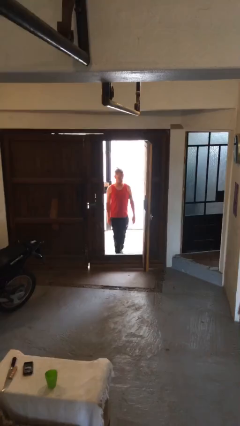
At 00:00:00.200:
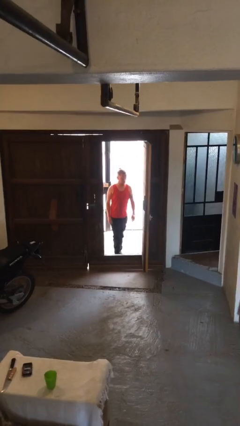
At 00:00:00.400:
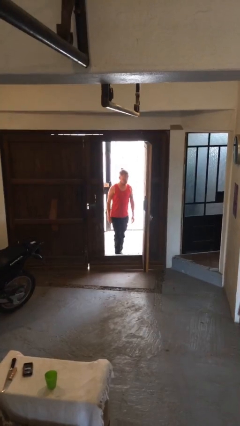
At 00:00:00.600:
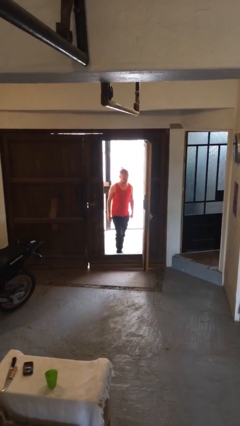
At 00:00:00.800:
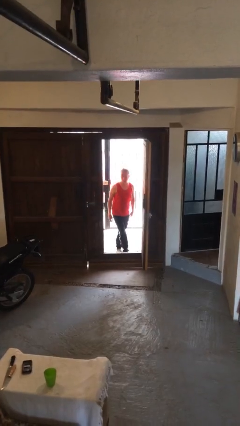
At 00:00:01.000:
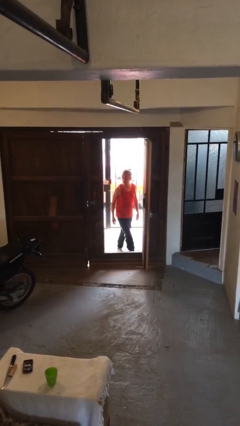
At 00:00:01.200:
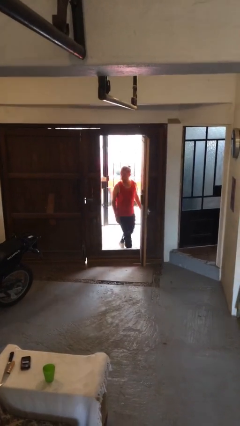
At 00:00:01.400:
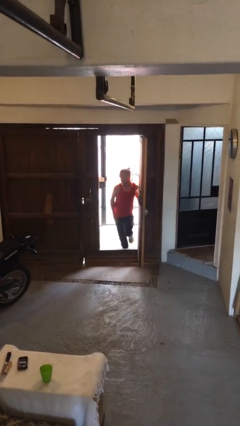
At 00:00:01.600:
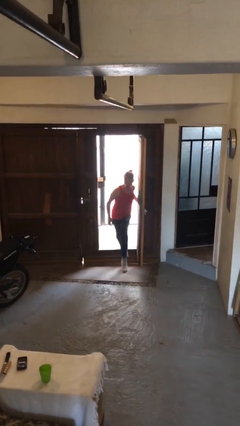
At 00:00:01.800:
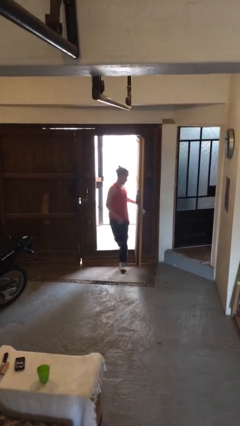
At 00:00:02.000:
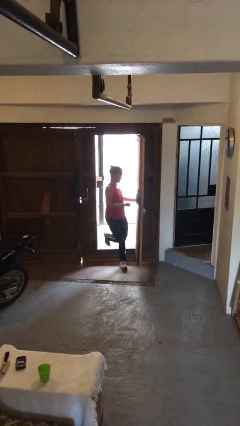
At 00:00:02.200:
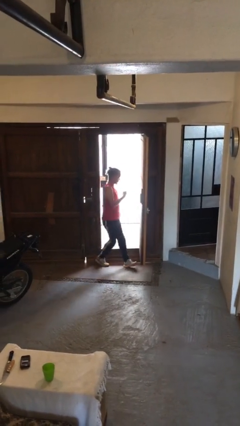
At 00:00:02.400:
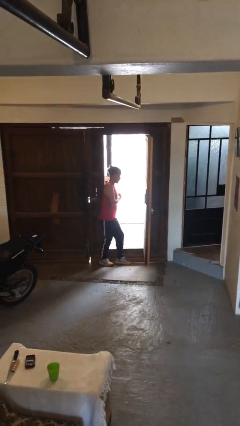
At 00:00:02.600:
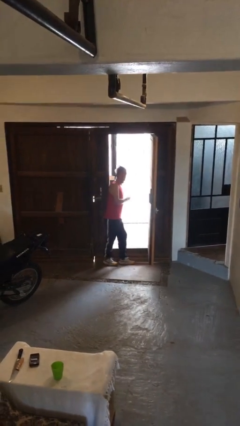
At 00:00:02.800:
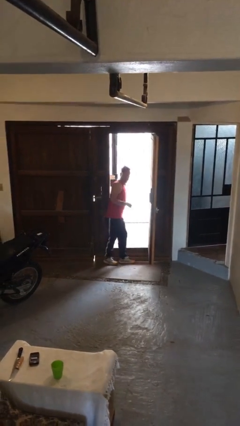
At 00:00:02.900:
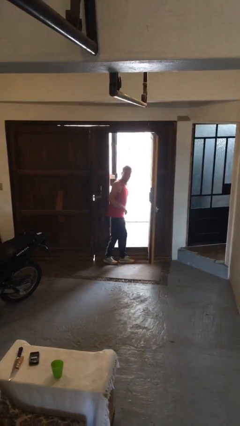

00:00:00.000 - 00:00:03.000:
person bumps into wall

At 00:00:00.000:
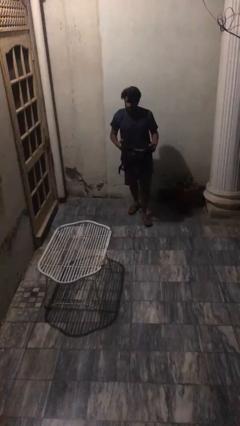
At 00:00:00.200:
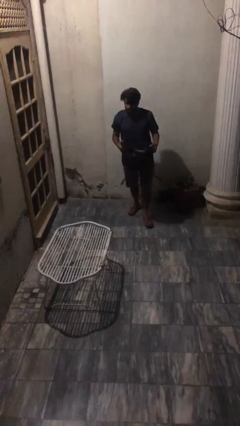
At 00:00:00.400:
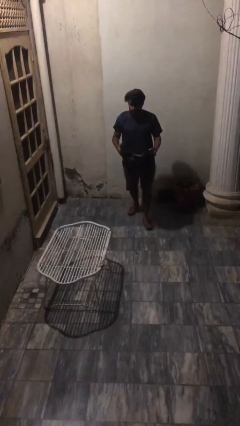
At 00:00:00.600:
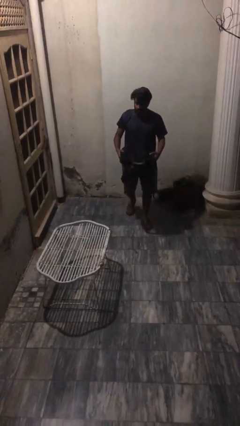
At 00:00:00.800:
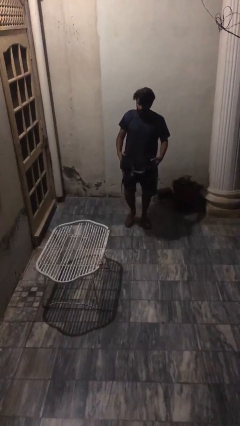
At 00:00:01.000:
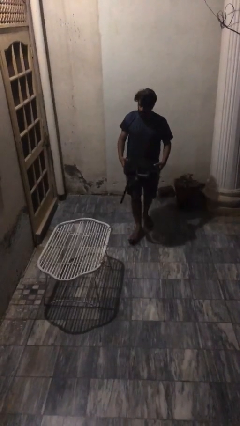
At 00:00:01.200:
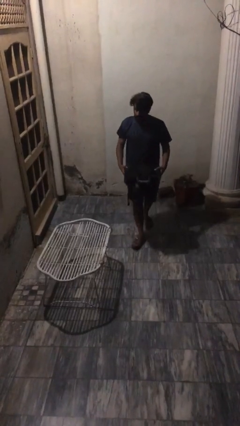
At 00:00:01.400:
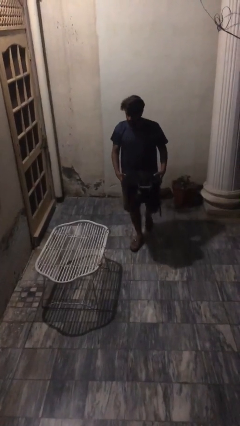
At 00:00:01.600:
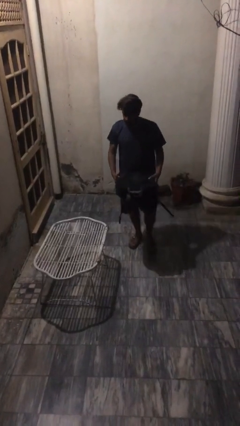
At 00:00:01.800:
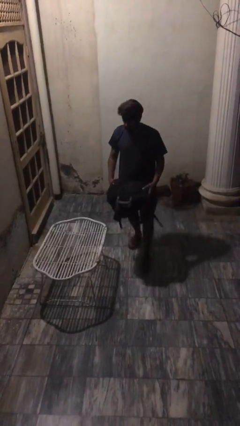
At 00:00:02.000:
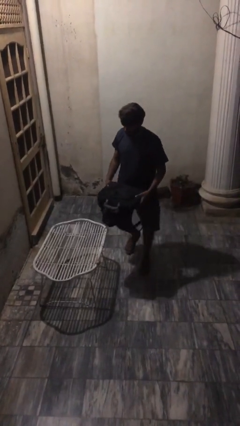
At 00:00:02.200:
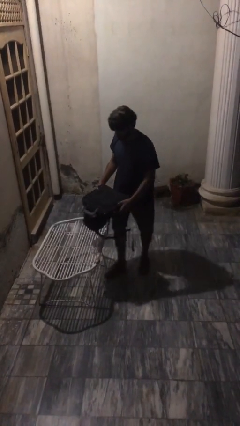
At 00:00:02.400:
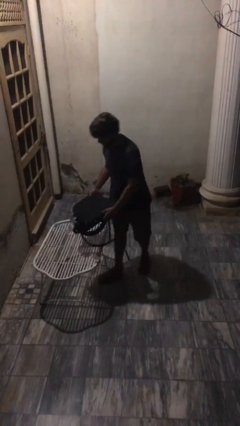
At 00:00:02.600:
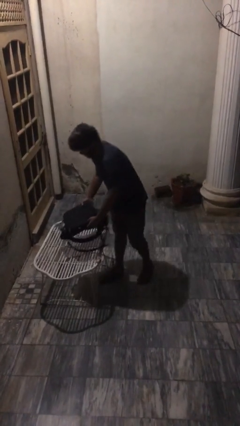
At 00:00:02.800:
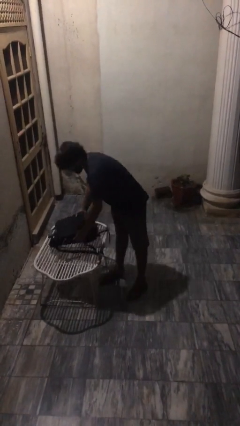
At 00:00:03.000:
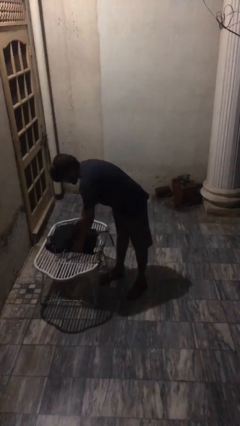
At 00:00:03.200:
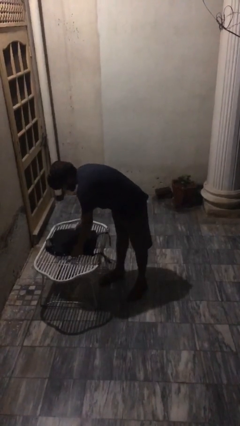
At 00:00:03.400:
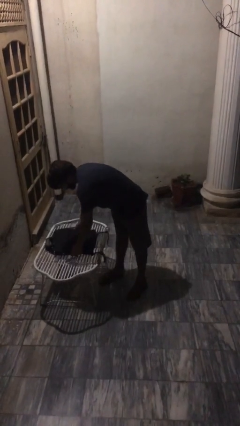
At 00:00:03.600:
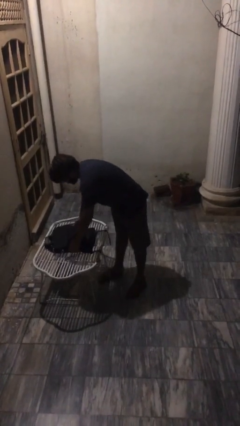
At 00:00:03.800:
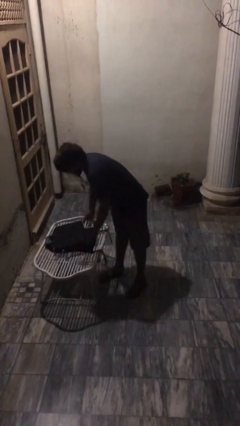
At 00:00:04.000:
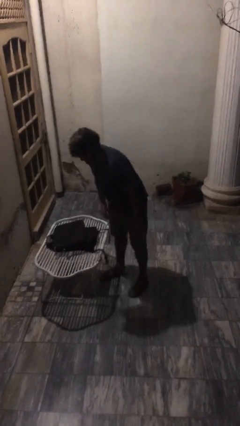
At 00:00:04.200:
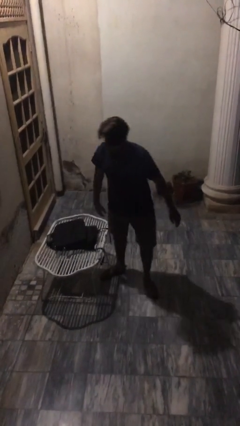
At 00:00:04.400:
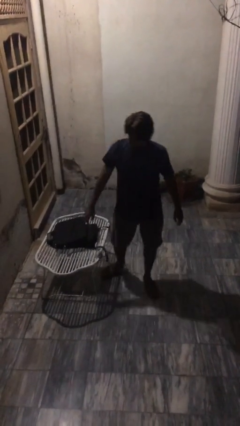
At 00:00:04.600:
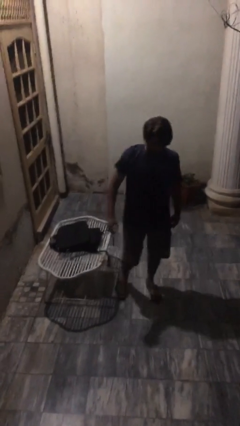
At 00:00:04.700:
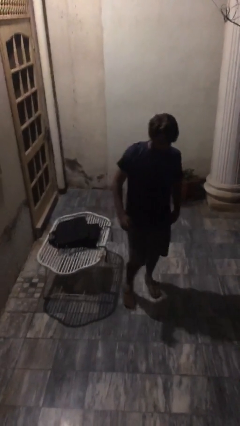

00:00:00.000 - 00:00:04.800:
person puts down object on table

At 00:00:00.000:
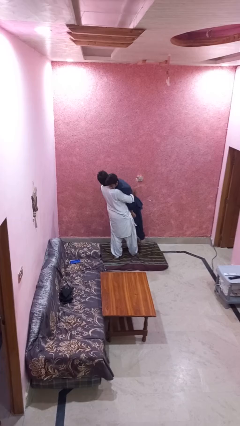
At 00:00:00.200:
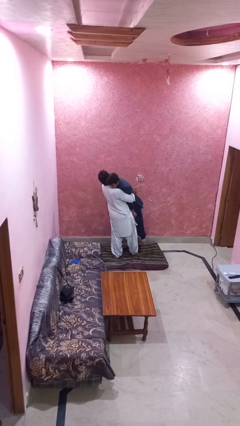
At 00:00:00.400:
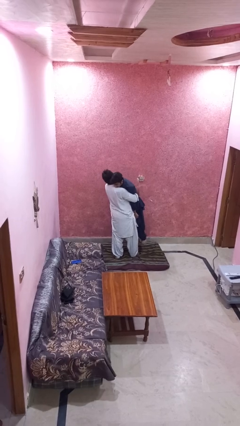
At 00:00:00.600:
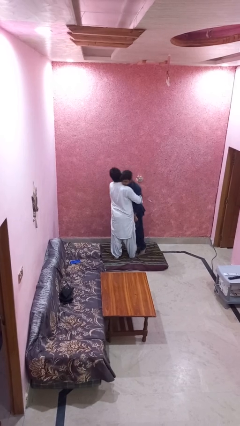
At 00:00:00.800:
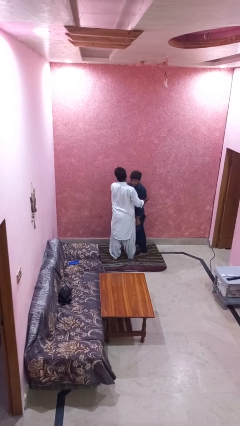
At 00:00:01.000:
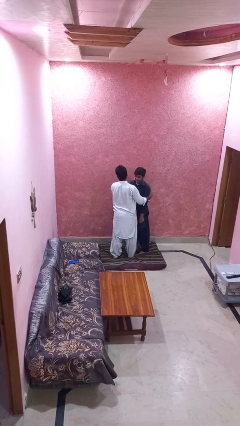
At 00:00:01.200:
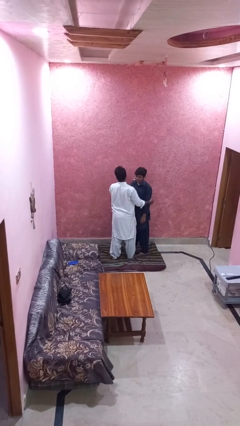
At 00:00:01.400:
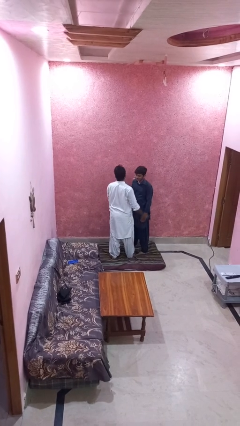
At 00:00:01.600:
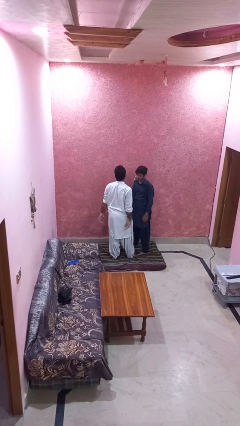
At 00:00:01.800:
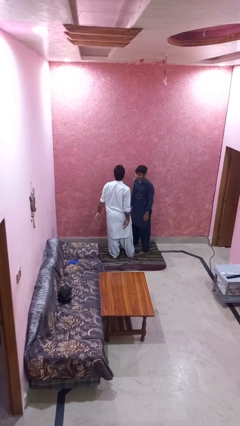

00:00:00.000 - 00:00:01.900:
person puts down person

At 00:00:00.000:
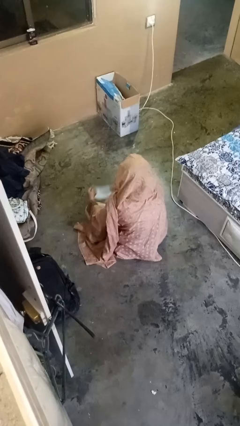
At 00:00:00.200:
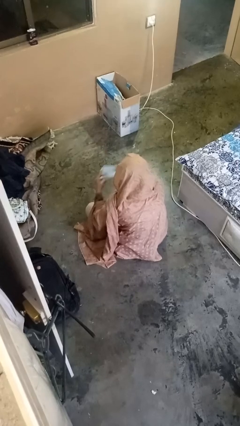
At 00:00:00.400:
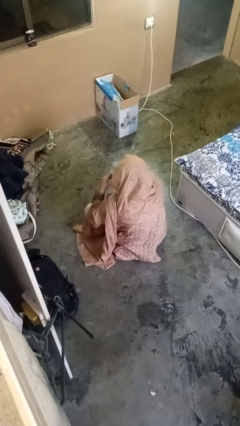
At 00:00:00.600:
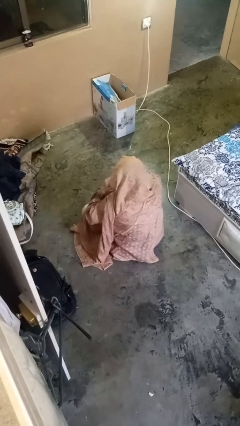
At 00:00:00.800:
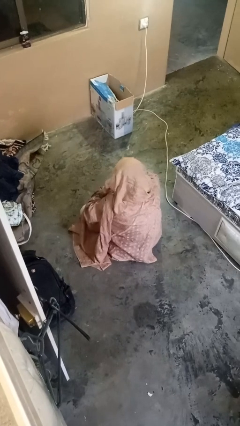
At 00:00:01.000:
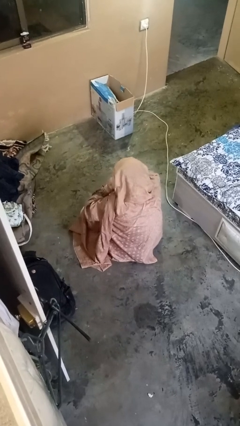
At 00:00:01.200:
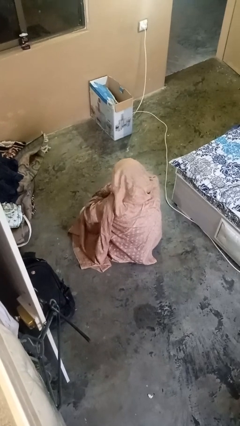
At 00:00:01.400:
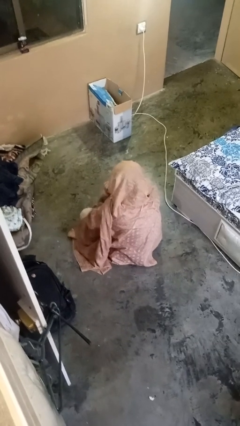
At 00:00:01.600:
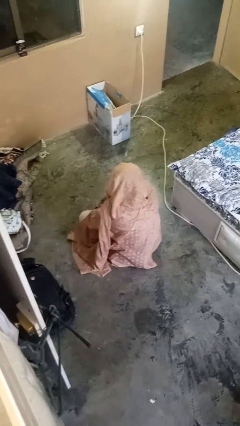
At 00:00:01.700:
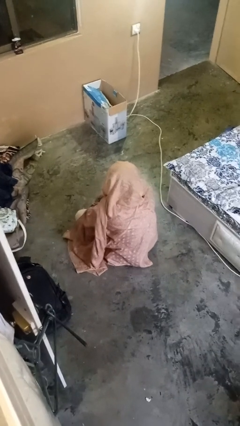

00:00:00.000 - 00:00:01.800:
person puts on facemask

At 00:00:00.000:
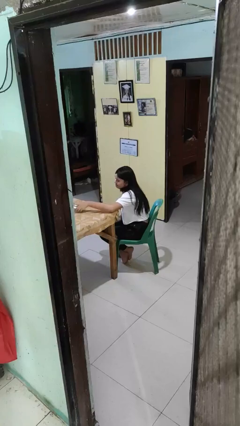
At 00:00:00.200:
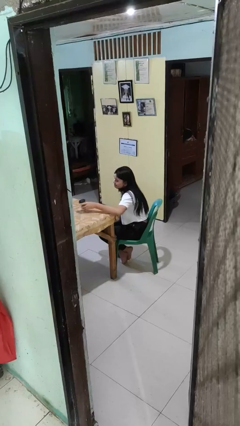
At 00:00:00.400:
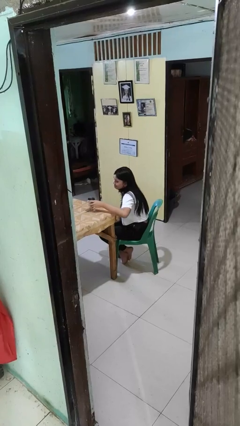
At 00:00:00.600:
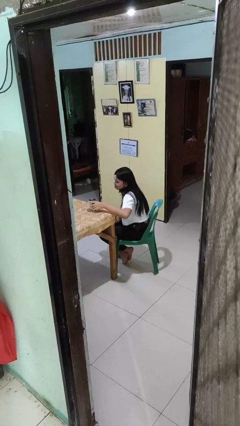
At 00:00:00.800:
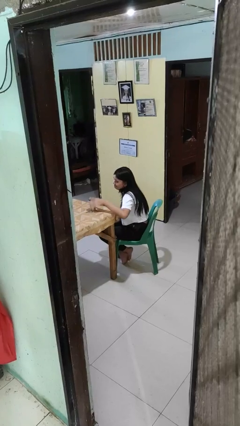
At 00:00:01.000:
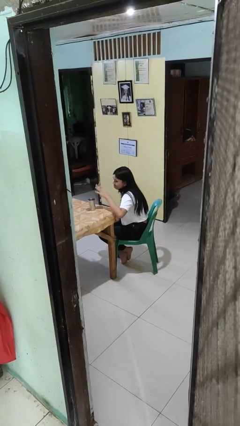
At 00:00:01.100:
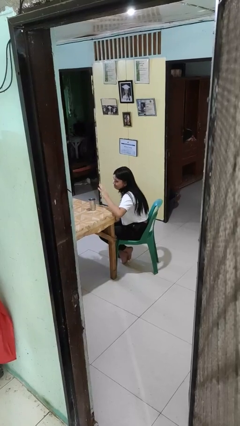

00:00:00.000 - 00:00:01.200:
person sets upright glass

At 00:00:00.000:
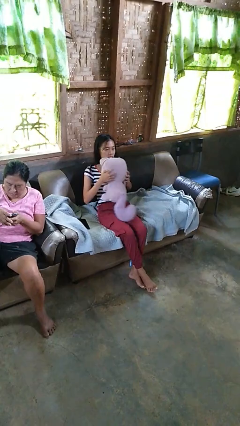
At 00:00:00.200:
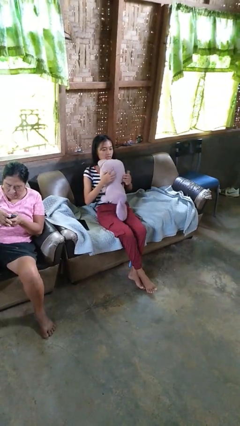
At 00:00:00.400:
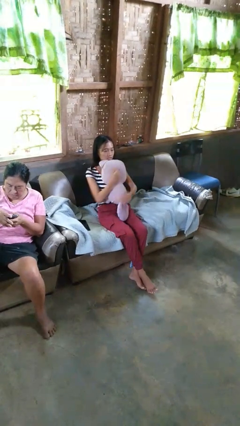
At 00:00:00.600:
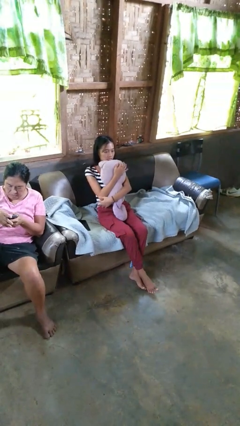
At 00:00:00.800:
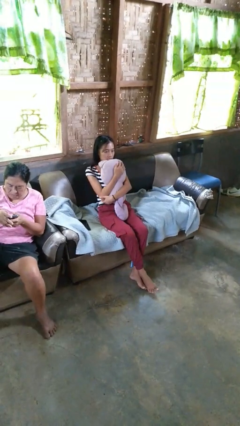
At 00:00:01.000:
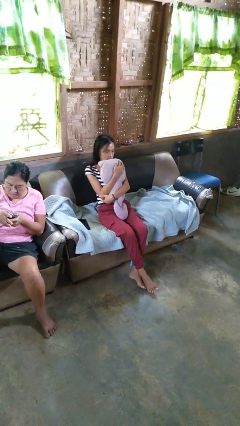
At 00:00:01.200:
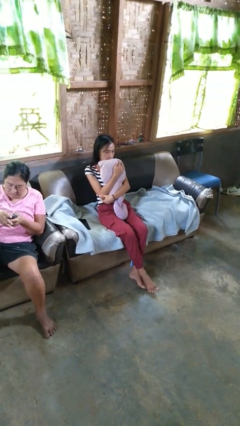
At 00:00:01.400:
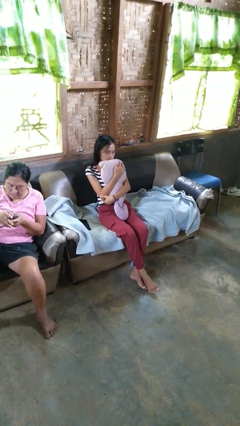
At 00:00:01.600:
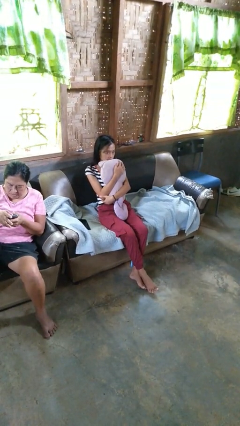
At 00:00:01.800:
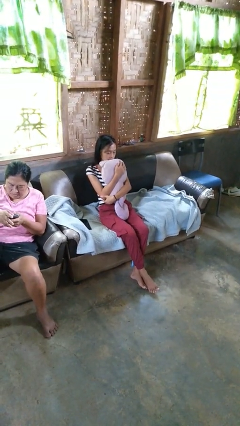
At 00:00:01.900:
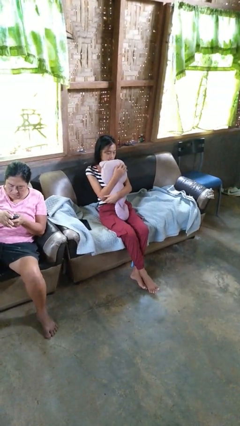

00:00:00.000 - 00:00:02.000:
person hugs stuffed animal

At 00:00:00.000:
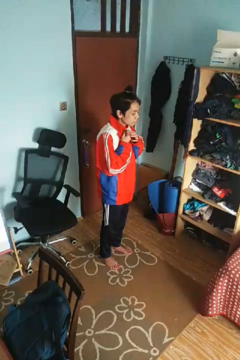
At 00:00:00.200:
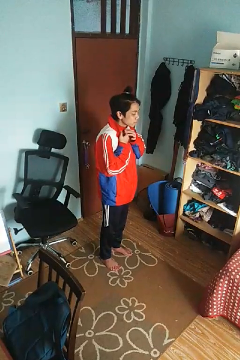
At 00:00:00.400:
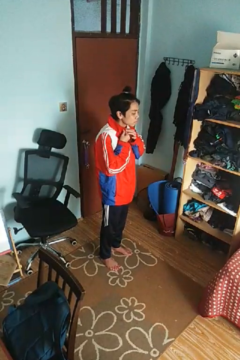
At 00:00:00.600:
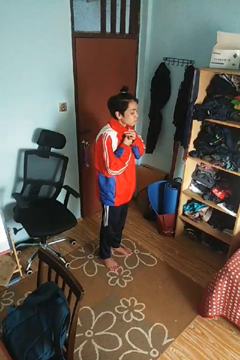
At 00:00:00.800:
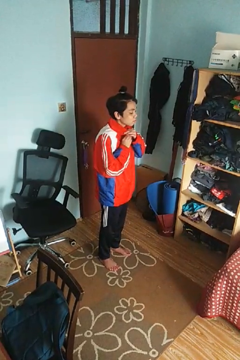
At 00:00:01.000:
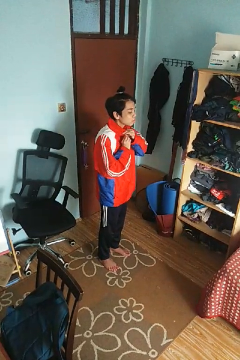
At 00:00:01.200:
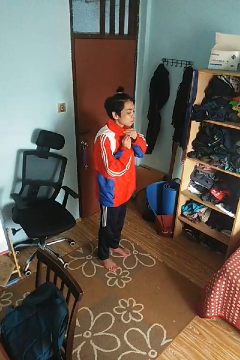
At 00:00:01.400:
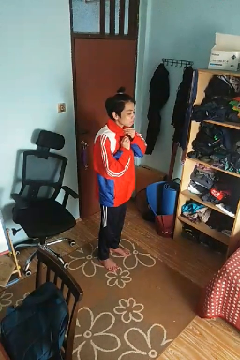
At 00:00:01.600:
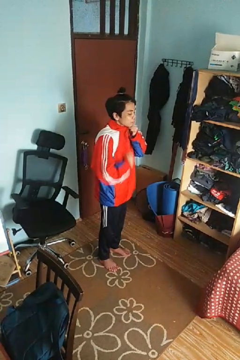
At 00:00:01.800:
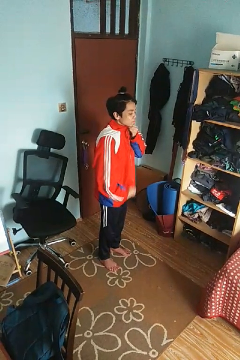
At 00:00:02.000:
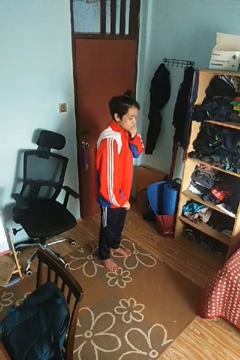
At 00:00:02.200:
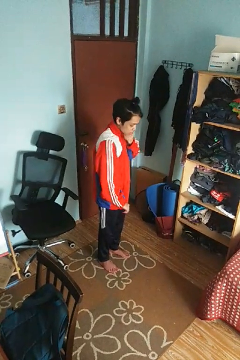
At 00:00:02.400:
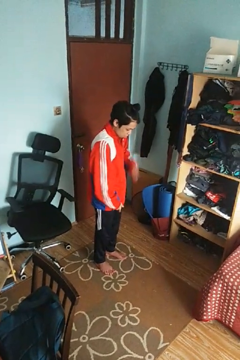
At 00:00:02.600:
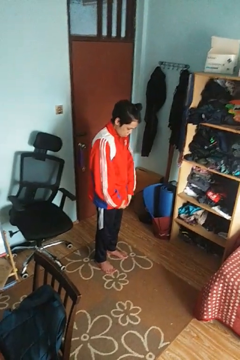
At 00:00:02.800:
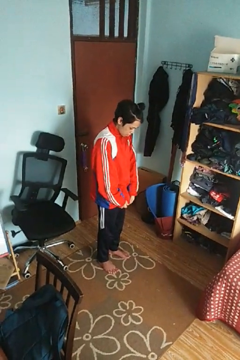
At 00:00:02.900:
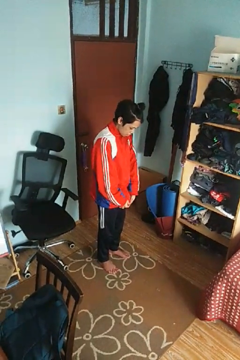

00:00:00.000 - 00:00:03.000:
person unzips jacket
